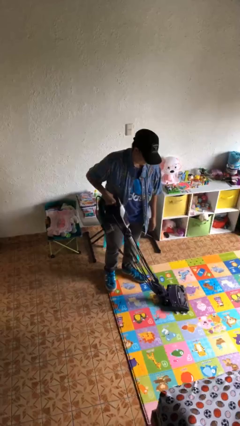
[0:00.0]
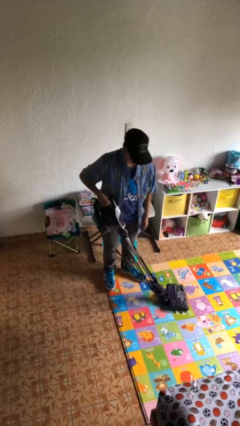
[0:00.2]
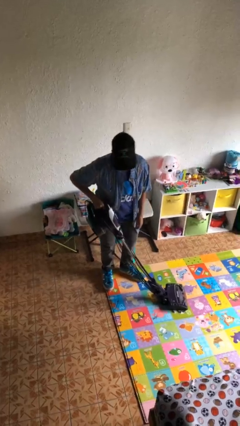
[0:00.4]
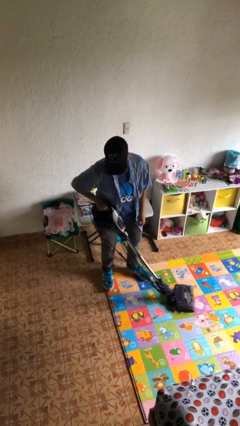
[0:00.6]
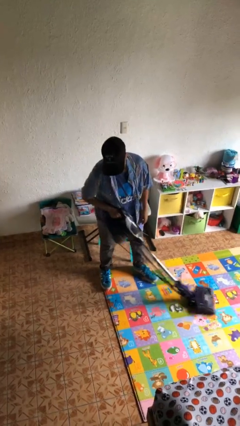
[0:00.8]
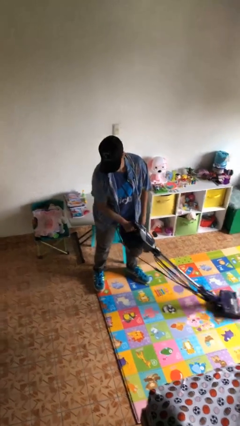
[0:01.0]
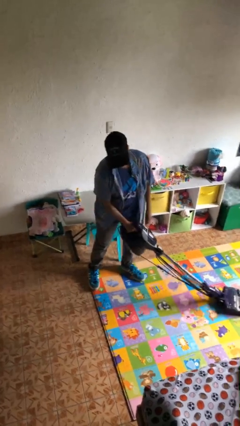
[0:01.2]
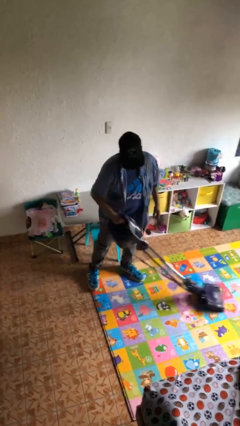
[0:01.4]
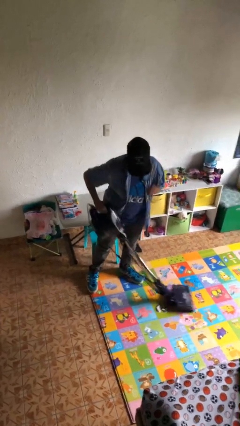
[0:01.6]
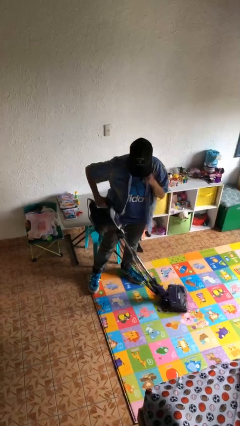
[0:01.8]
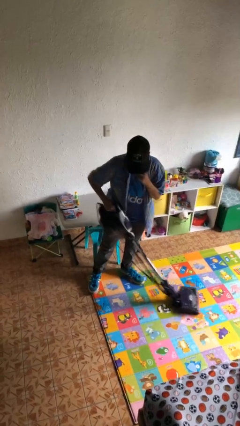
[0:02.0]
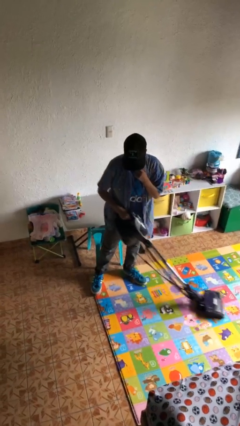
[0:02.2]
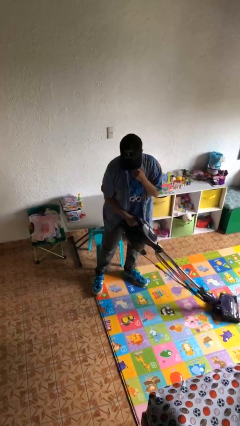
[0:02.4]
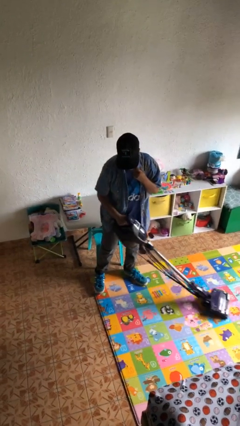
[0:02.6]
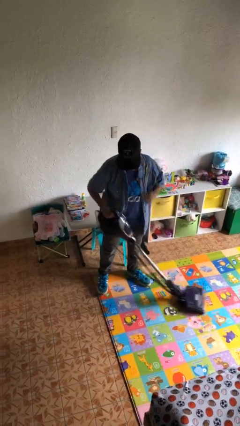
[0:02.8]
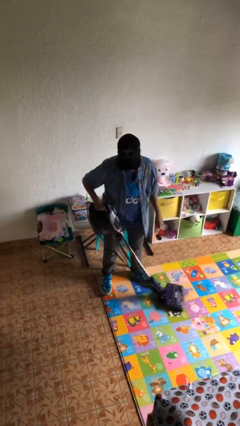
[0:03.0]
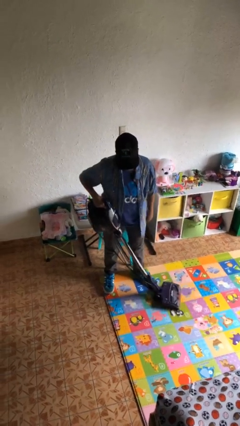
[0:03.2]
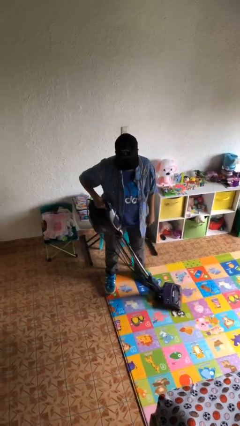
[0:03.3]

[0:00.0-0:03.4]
person vacuums carpet

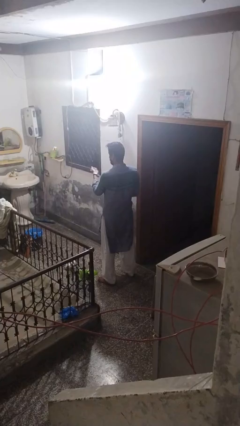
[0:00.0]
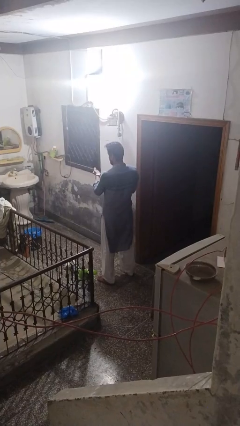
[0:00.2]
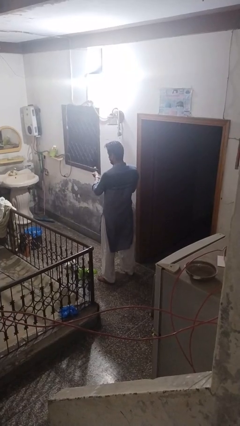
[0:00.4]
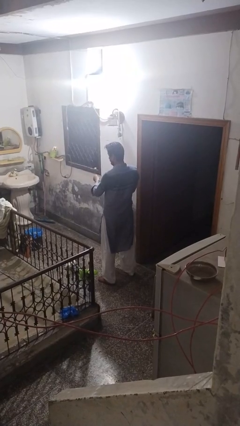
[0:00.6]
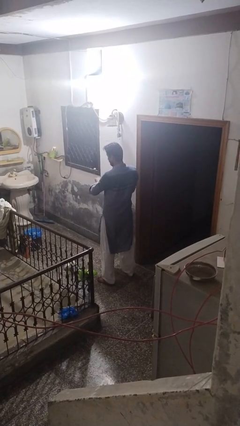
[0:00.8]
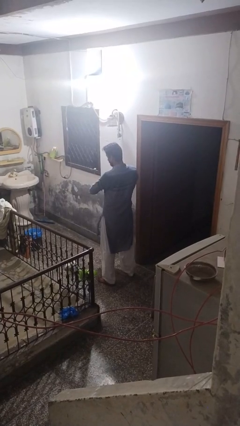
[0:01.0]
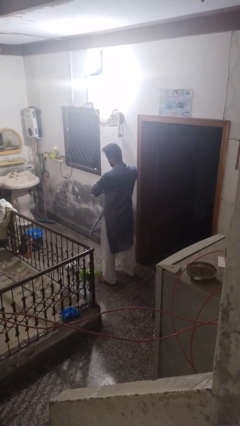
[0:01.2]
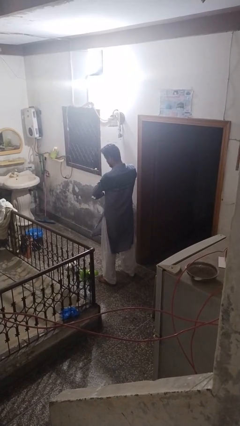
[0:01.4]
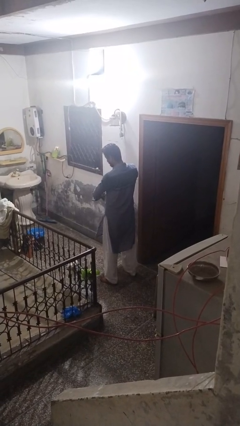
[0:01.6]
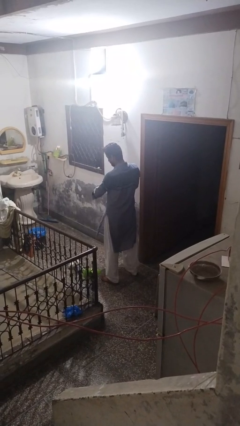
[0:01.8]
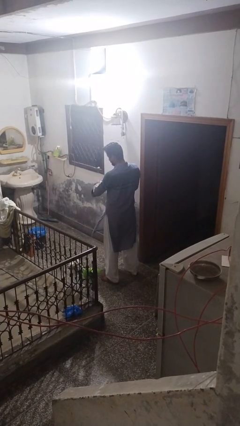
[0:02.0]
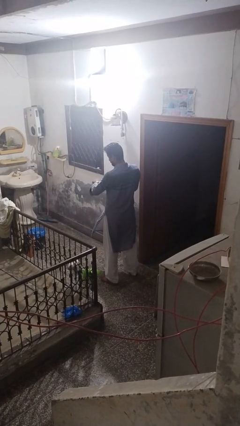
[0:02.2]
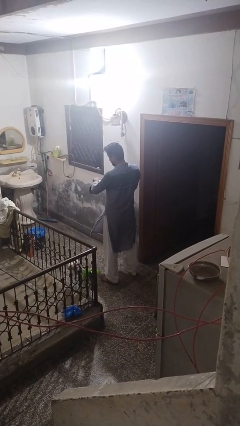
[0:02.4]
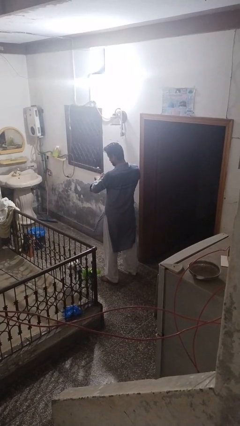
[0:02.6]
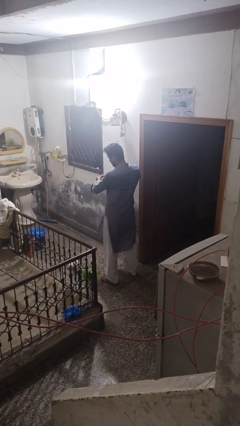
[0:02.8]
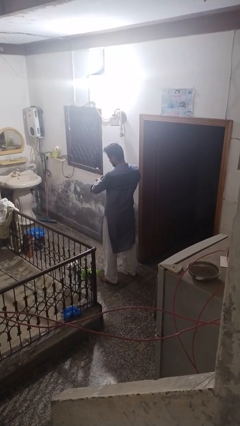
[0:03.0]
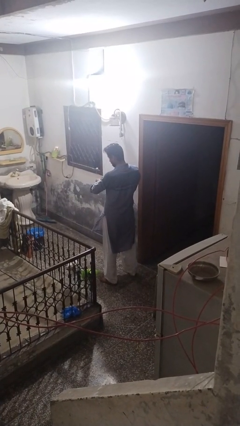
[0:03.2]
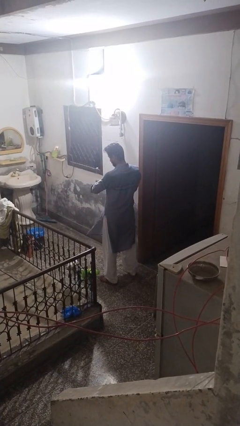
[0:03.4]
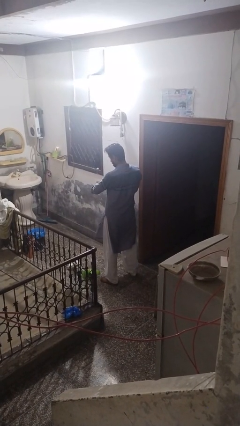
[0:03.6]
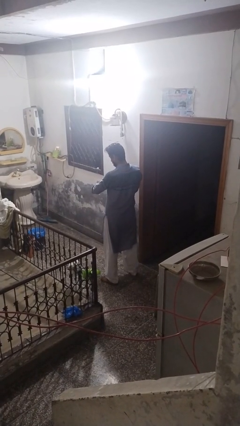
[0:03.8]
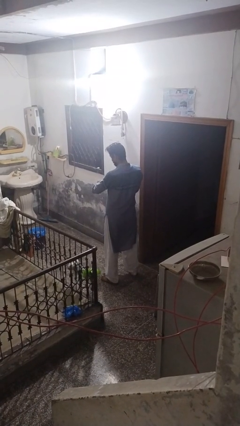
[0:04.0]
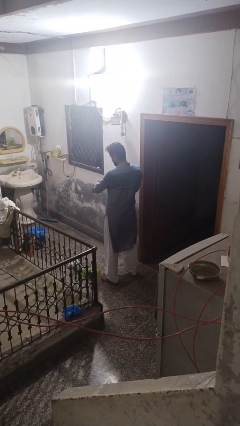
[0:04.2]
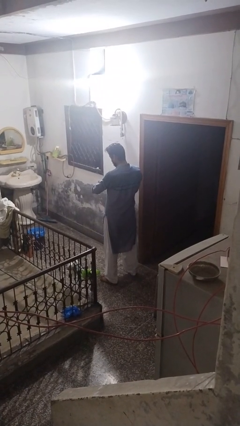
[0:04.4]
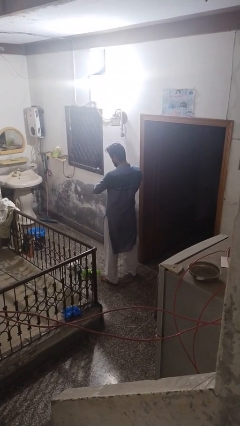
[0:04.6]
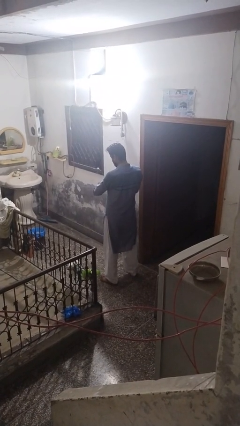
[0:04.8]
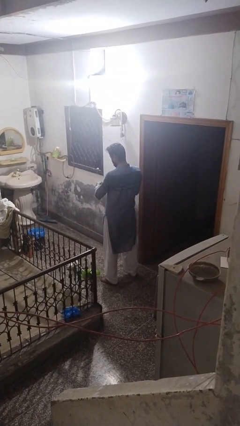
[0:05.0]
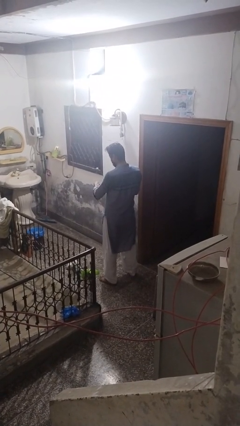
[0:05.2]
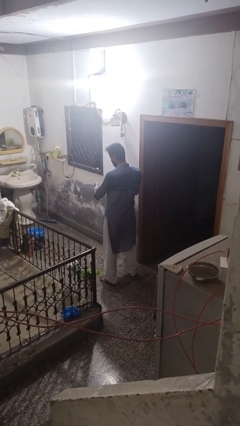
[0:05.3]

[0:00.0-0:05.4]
person dries hands with towel

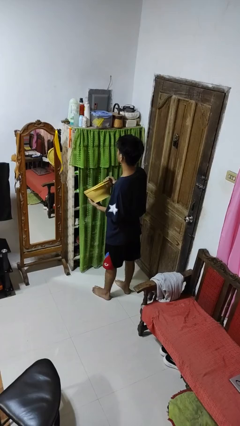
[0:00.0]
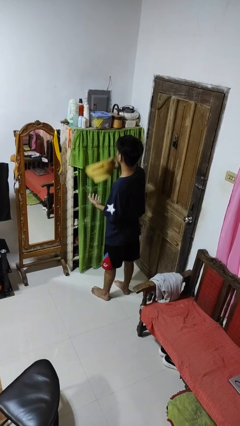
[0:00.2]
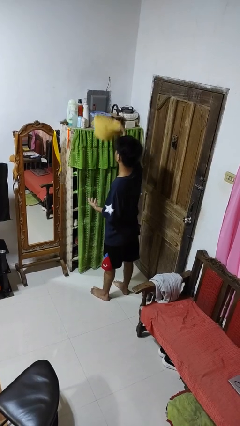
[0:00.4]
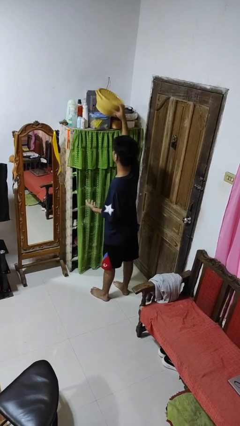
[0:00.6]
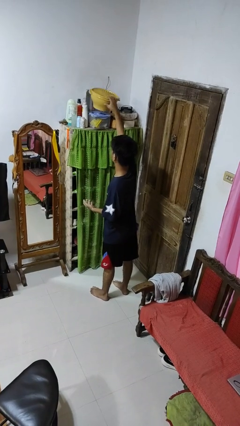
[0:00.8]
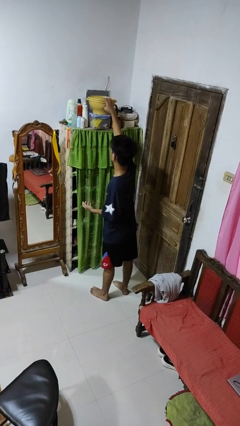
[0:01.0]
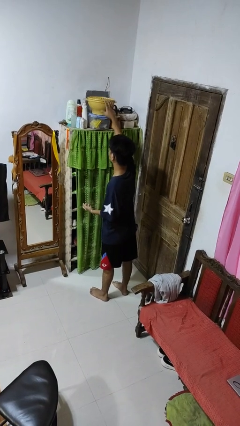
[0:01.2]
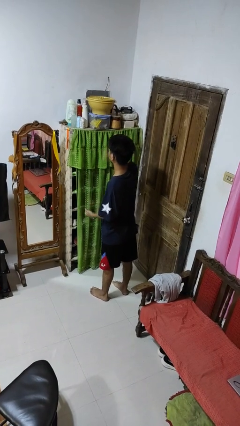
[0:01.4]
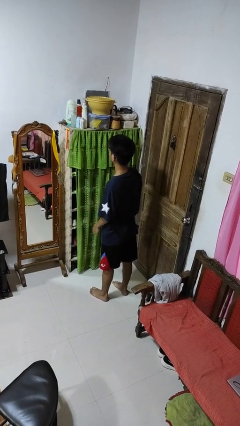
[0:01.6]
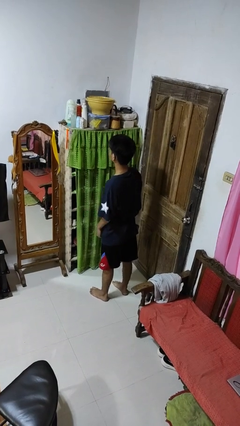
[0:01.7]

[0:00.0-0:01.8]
person puts down object on shelf

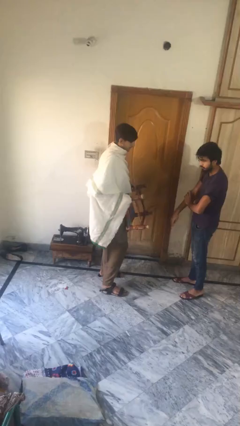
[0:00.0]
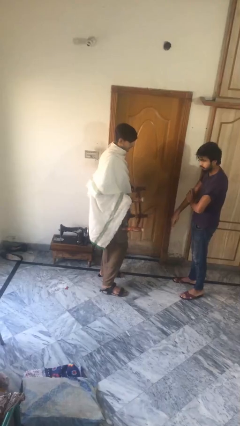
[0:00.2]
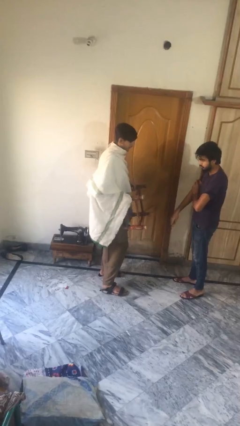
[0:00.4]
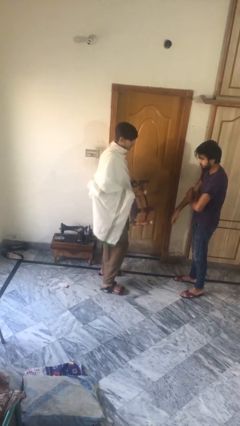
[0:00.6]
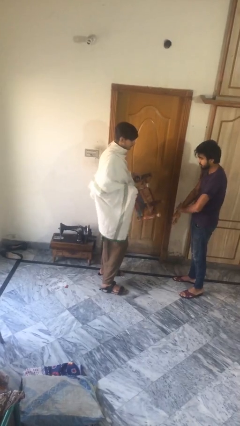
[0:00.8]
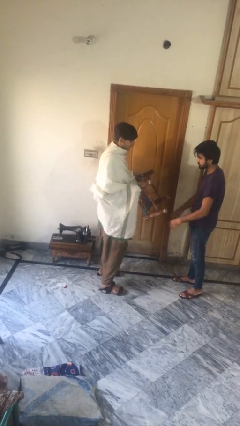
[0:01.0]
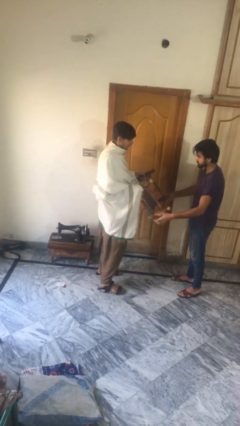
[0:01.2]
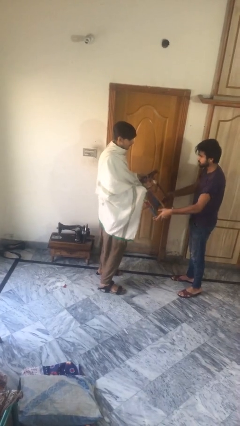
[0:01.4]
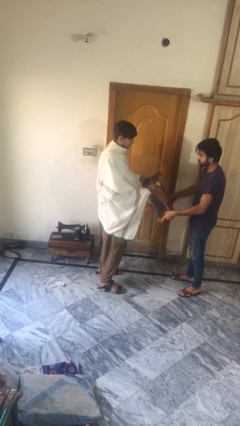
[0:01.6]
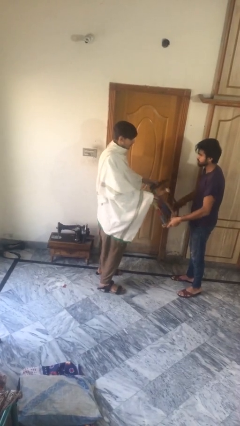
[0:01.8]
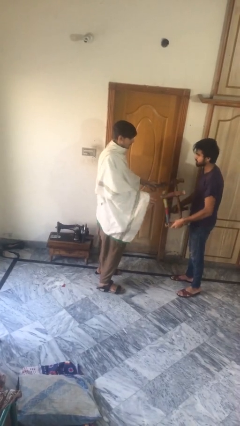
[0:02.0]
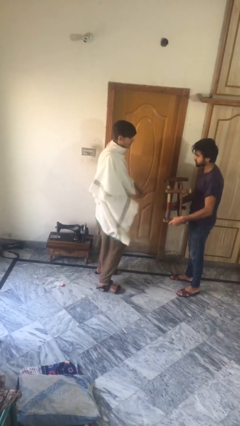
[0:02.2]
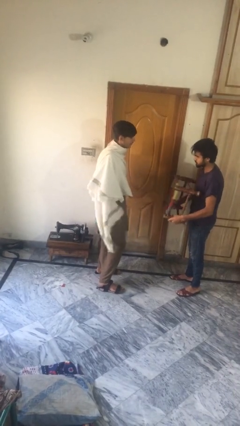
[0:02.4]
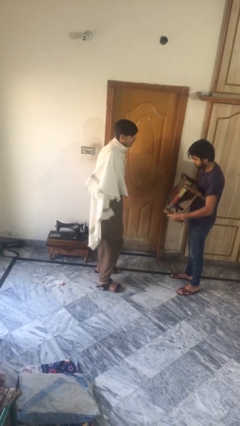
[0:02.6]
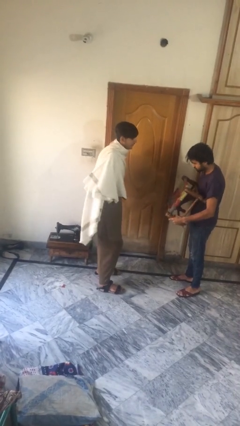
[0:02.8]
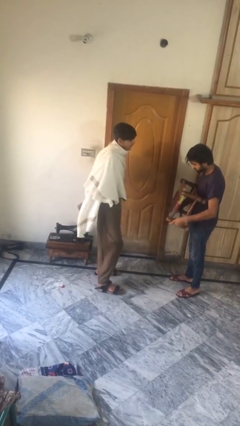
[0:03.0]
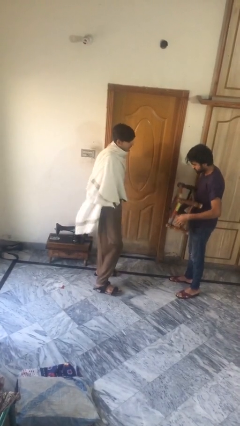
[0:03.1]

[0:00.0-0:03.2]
person transfers object to person

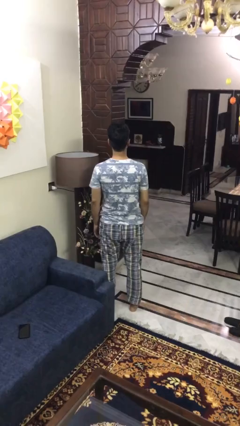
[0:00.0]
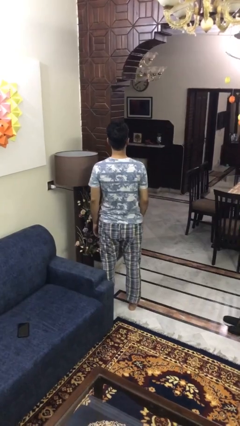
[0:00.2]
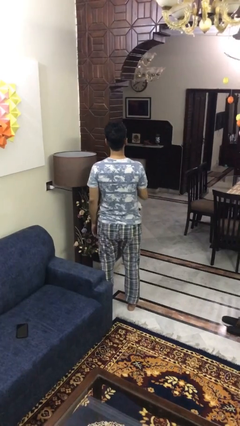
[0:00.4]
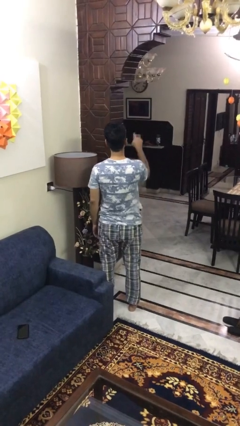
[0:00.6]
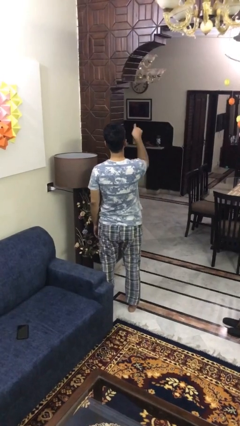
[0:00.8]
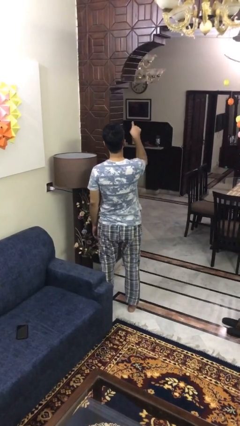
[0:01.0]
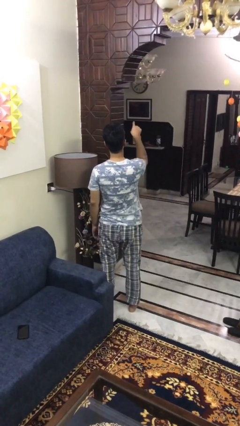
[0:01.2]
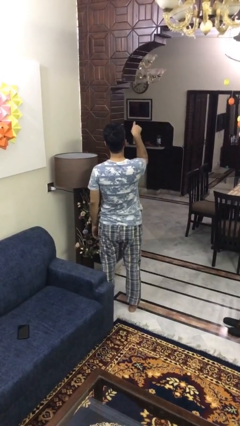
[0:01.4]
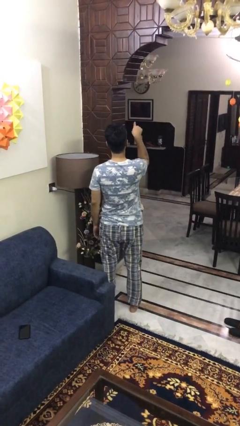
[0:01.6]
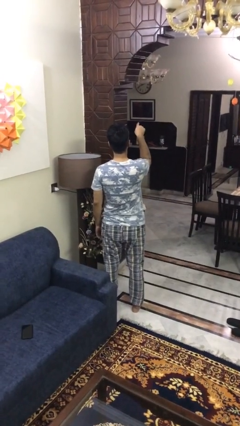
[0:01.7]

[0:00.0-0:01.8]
person points at person

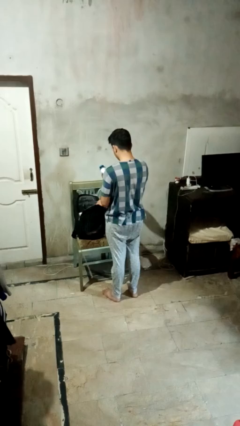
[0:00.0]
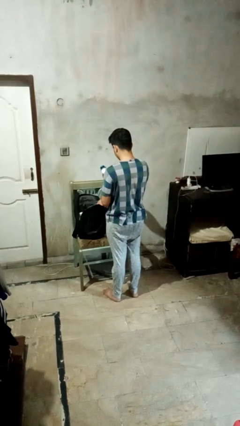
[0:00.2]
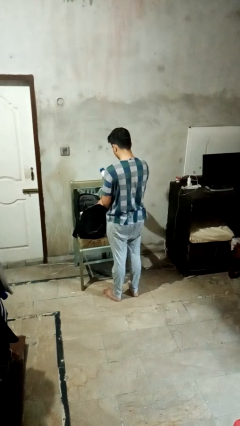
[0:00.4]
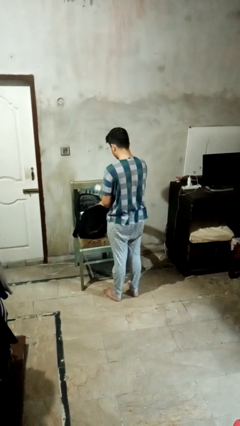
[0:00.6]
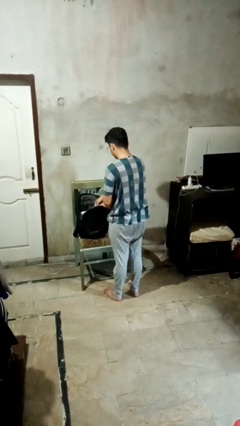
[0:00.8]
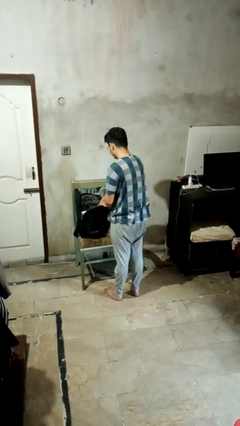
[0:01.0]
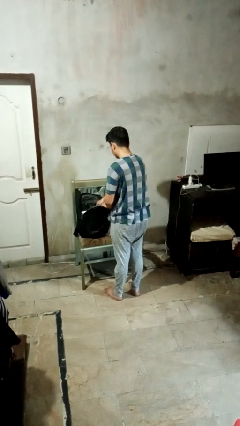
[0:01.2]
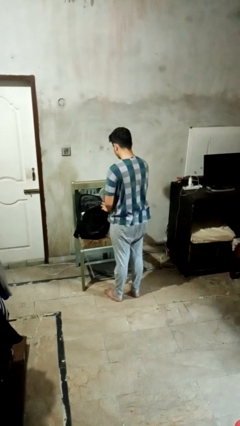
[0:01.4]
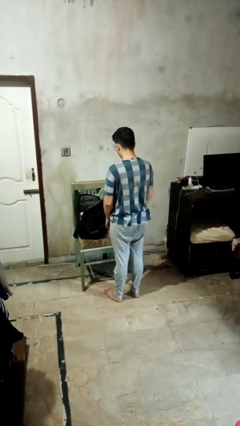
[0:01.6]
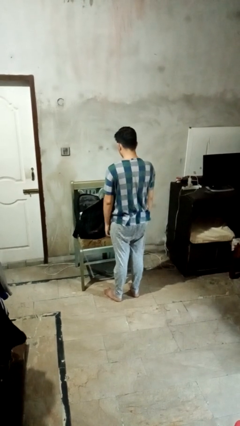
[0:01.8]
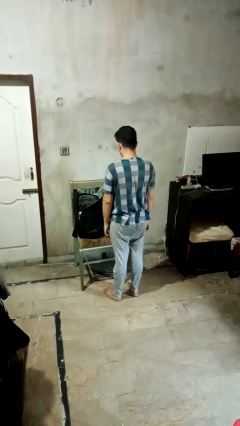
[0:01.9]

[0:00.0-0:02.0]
person puts object into backpack
